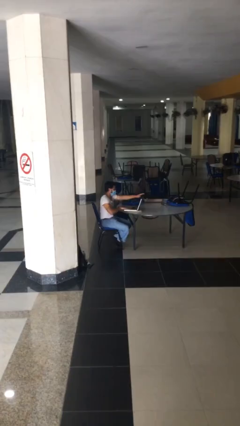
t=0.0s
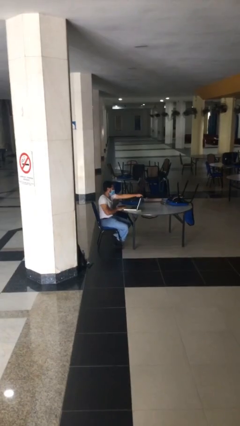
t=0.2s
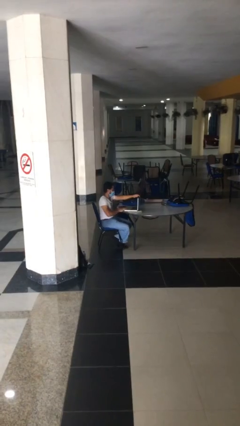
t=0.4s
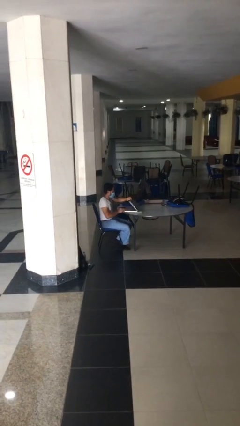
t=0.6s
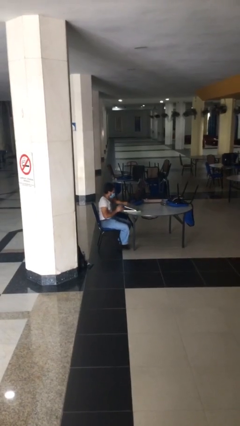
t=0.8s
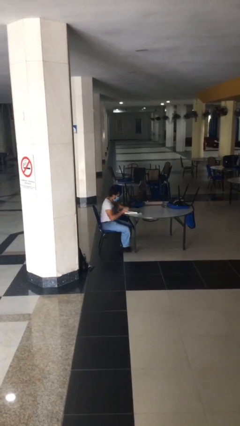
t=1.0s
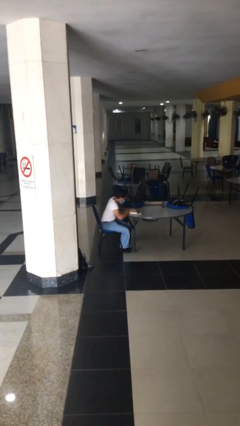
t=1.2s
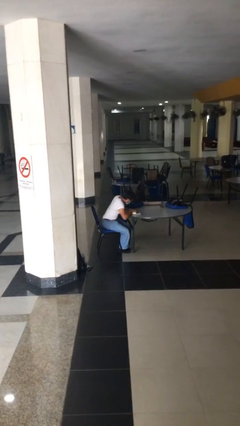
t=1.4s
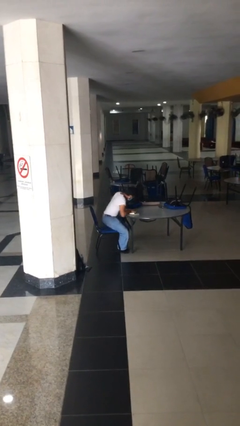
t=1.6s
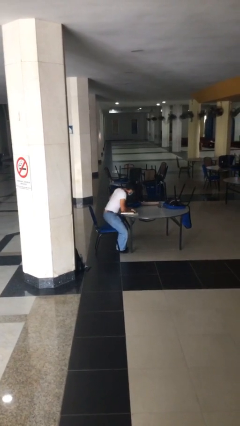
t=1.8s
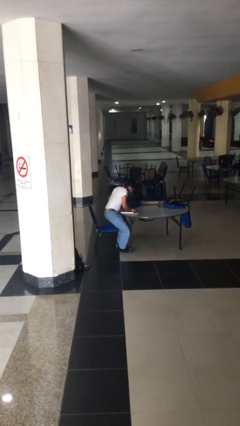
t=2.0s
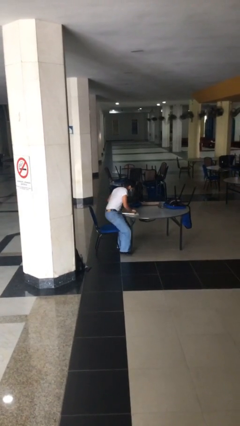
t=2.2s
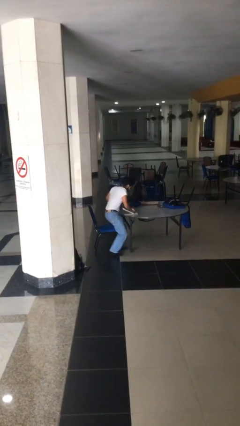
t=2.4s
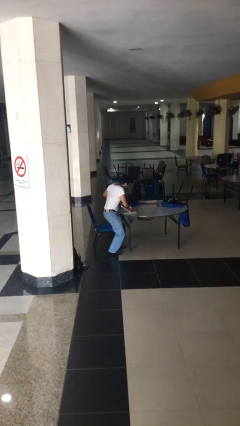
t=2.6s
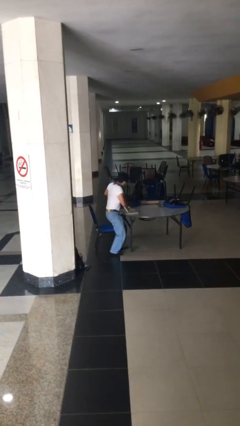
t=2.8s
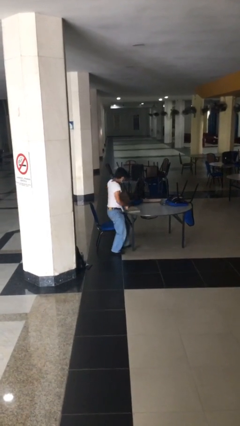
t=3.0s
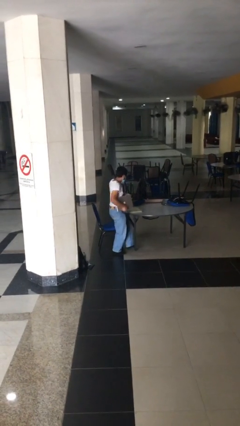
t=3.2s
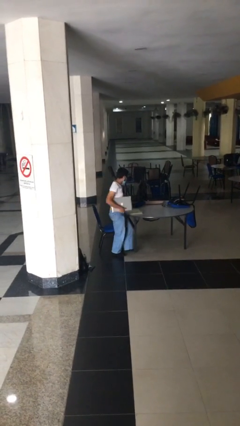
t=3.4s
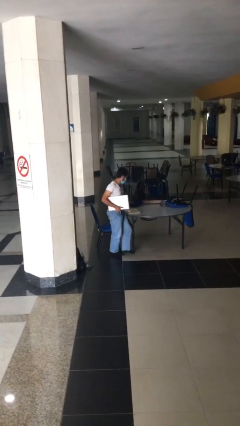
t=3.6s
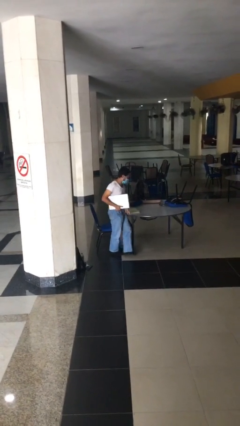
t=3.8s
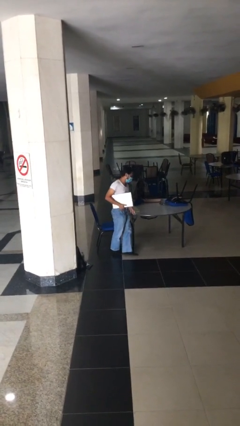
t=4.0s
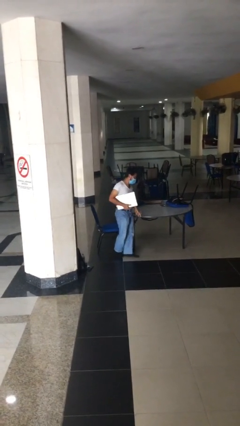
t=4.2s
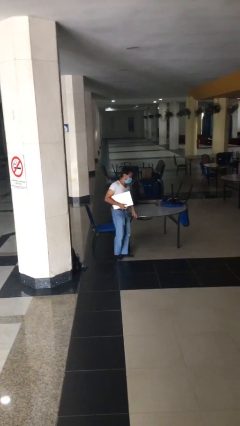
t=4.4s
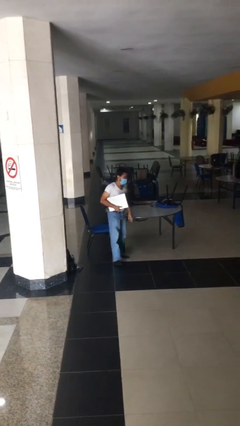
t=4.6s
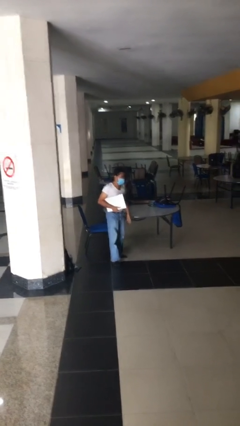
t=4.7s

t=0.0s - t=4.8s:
person stands up

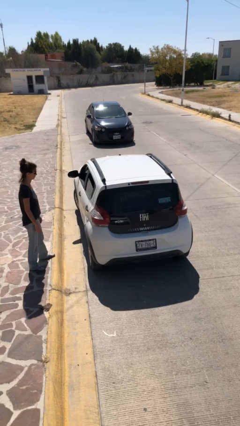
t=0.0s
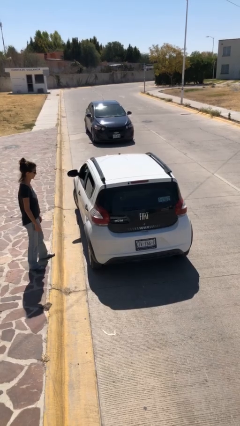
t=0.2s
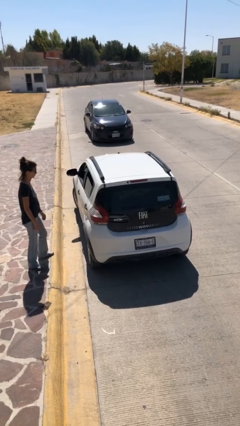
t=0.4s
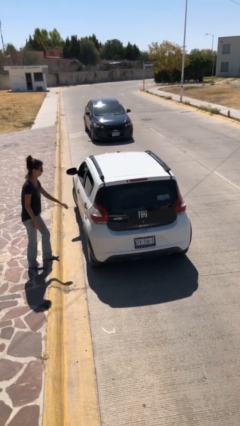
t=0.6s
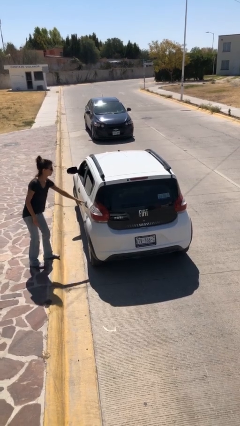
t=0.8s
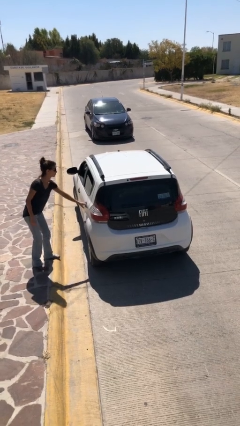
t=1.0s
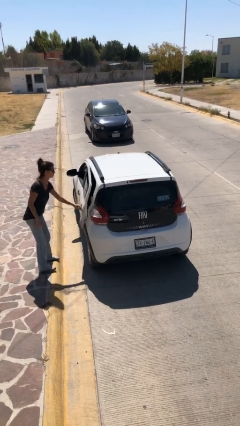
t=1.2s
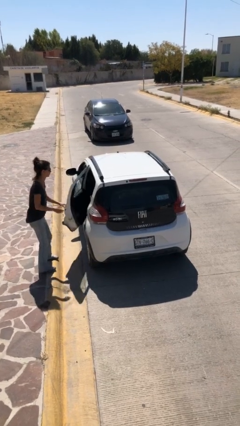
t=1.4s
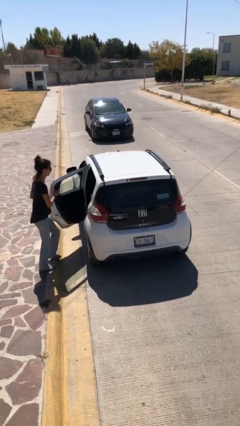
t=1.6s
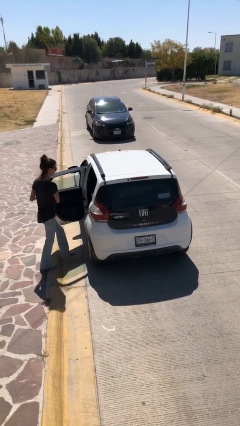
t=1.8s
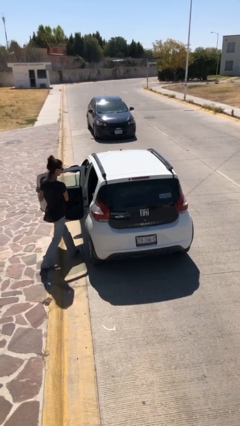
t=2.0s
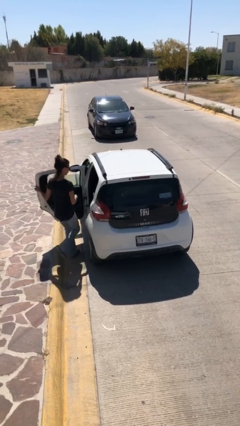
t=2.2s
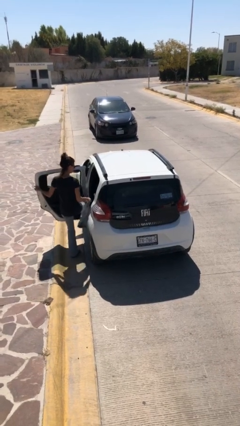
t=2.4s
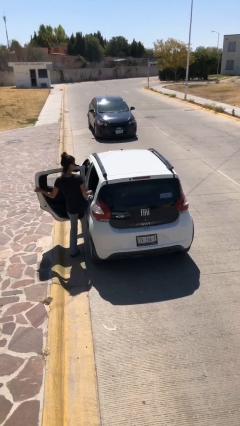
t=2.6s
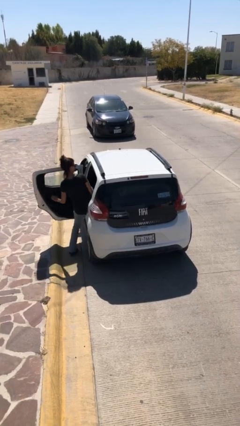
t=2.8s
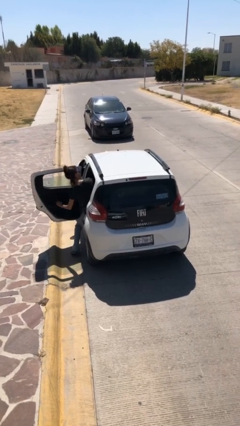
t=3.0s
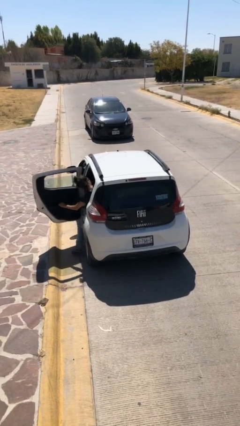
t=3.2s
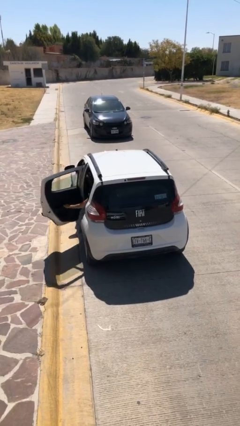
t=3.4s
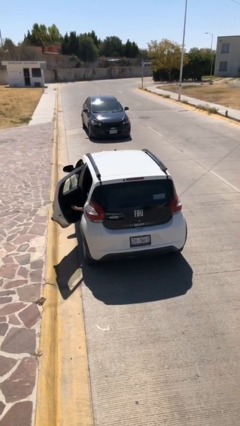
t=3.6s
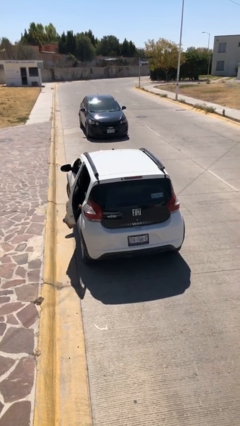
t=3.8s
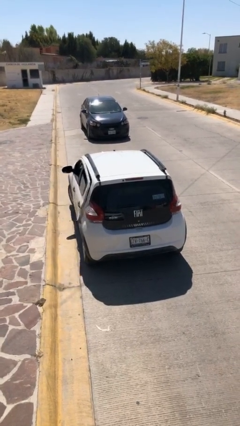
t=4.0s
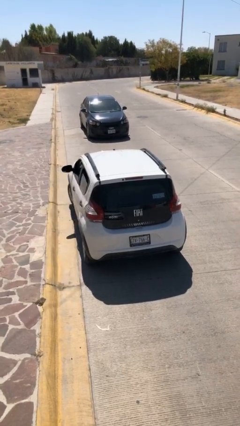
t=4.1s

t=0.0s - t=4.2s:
car picks up person

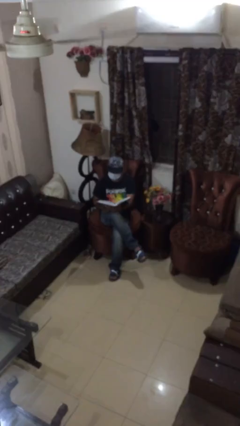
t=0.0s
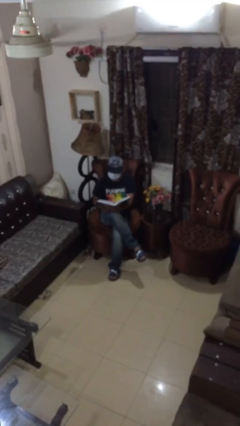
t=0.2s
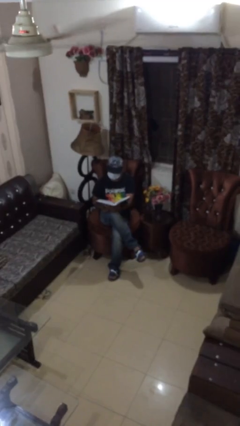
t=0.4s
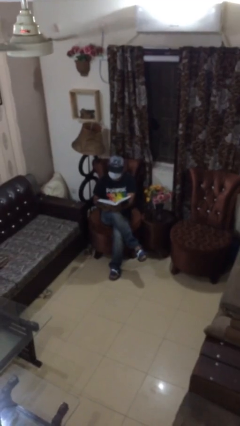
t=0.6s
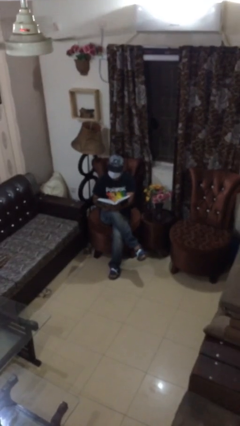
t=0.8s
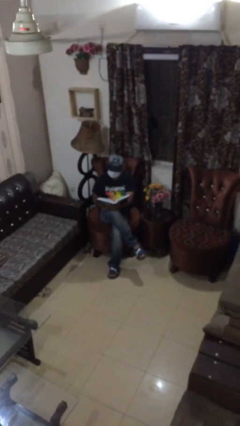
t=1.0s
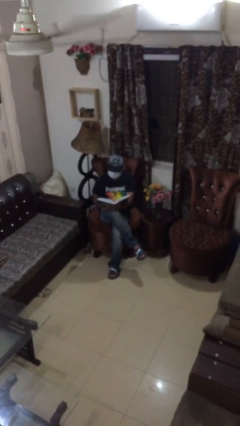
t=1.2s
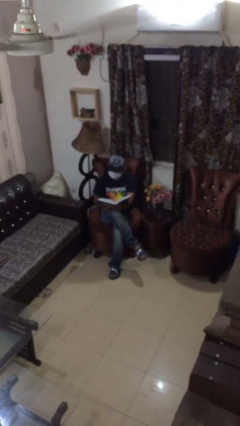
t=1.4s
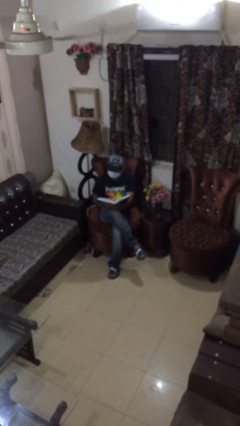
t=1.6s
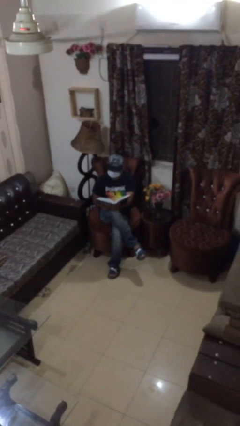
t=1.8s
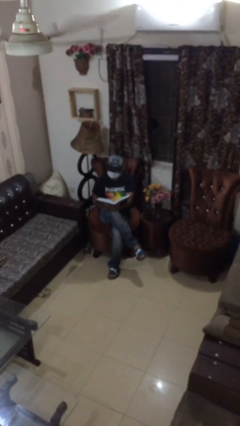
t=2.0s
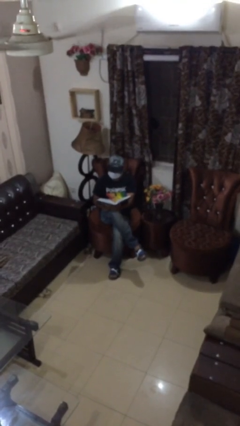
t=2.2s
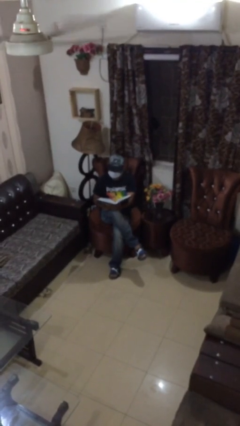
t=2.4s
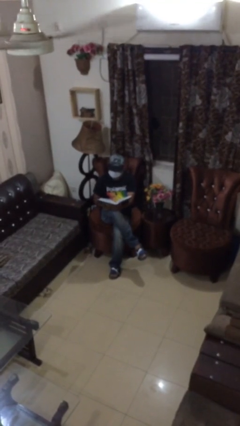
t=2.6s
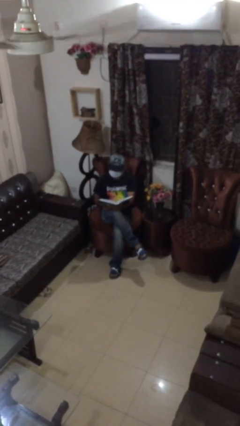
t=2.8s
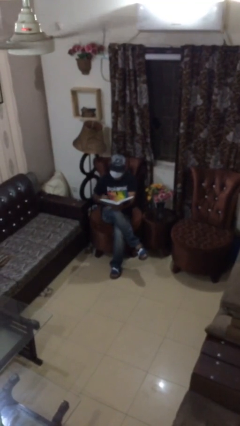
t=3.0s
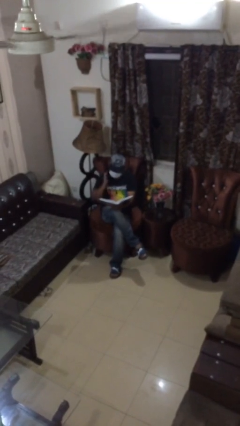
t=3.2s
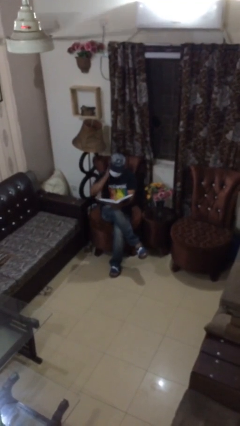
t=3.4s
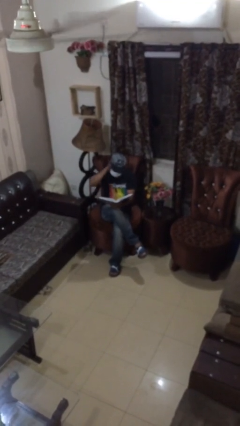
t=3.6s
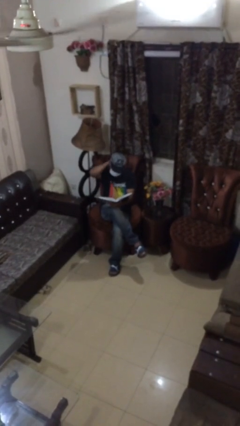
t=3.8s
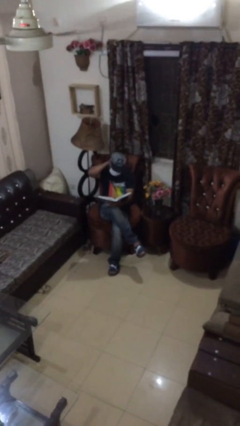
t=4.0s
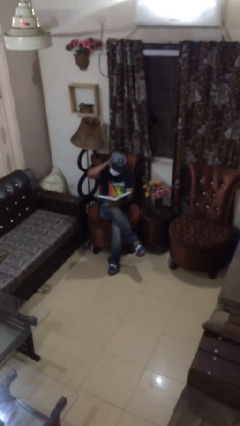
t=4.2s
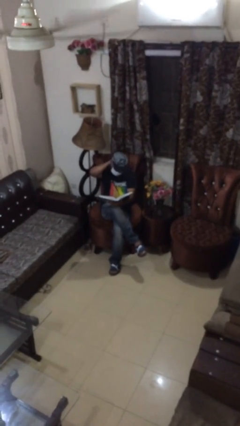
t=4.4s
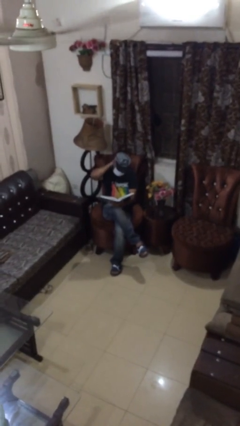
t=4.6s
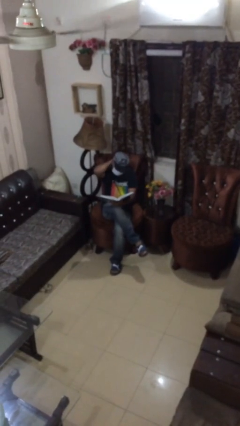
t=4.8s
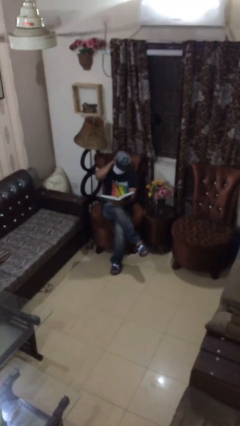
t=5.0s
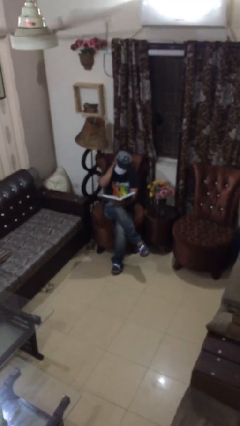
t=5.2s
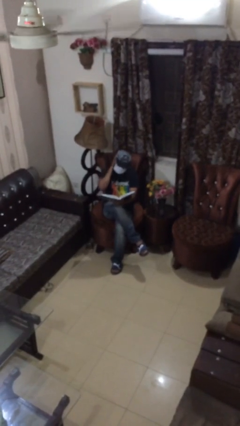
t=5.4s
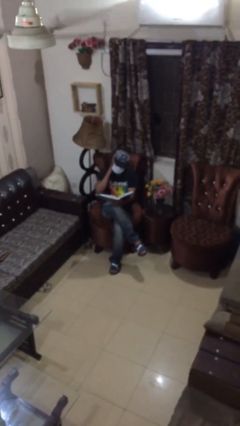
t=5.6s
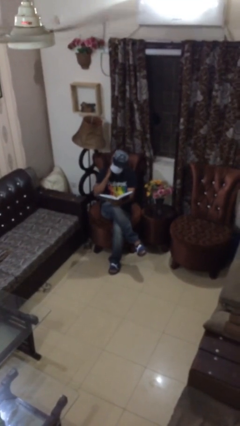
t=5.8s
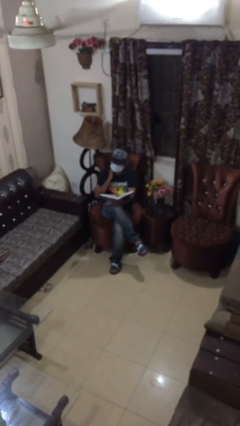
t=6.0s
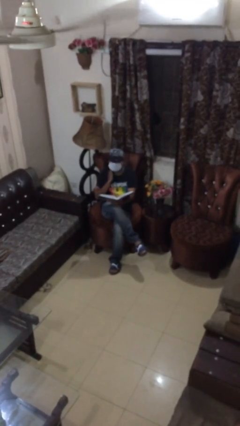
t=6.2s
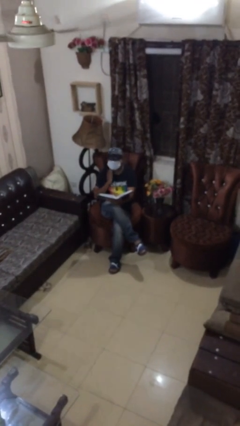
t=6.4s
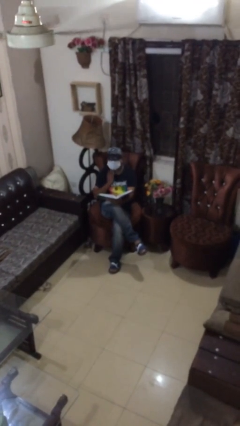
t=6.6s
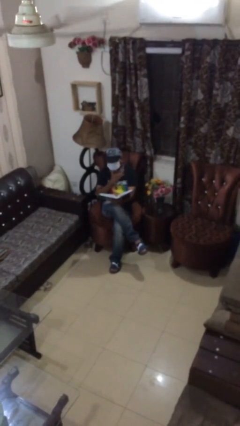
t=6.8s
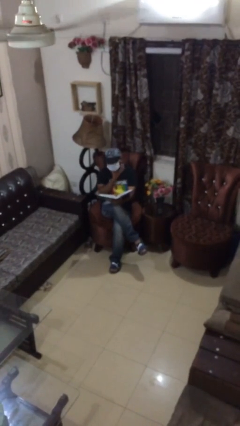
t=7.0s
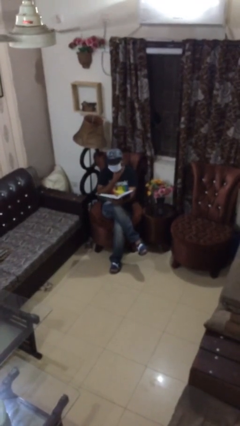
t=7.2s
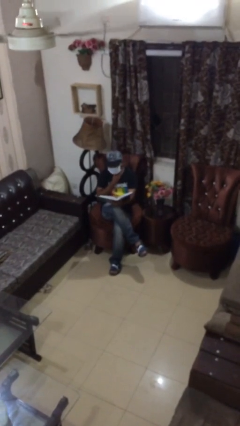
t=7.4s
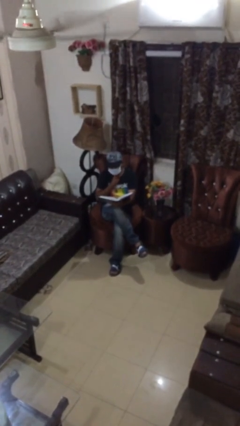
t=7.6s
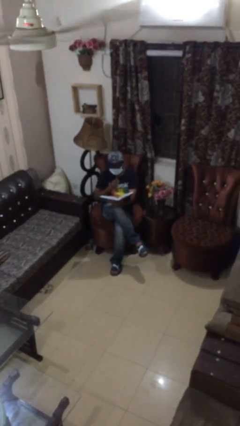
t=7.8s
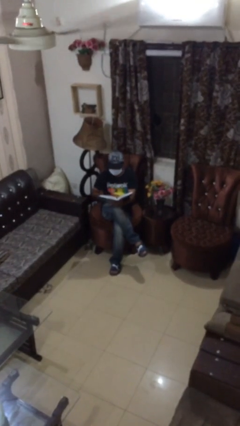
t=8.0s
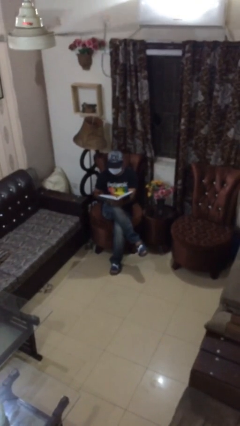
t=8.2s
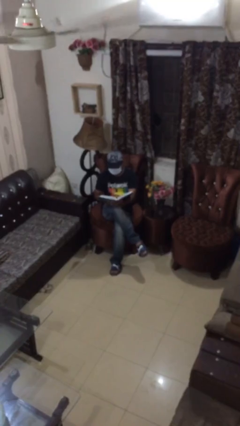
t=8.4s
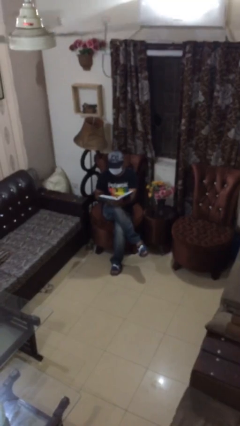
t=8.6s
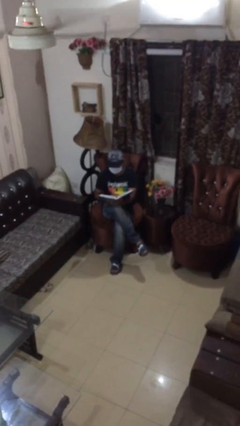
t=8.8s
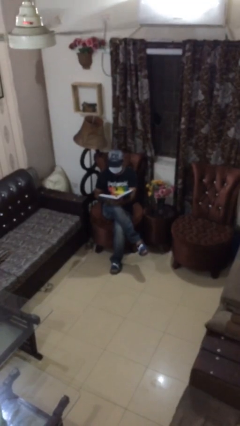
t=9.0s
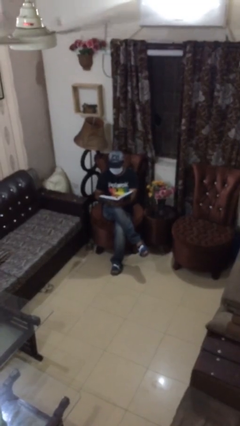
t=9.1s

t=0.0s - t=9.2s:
person reads document
